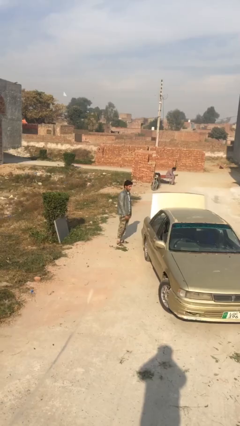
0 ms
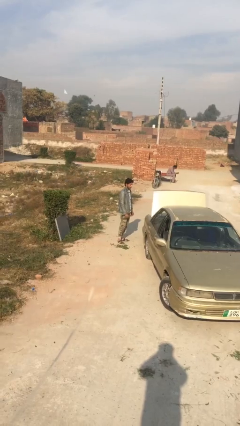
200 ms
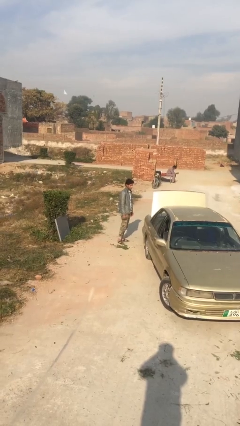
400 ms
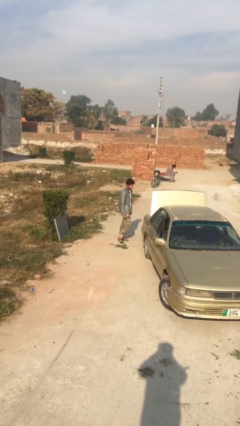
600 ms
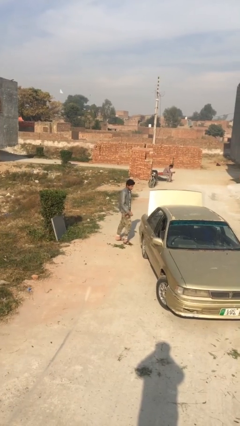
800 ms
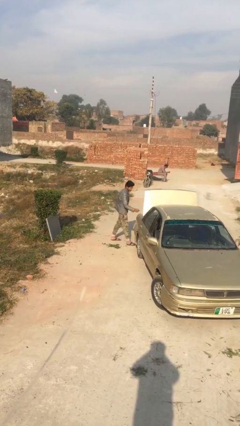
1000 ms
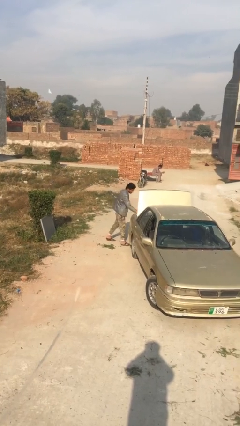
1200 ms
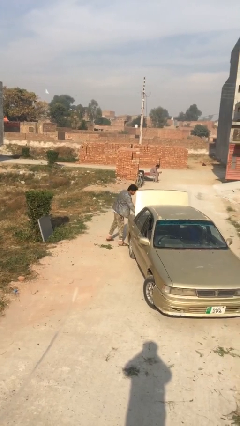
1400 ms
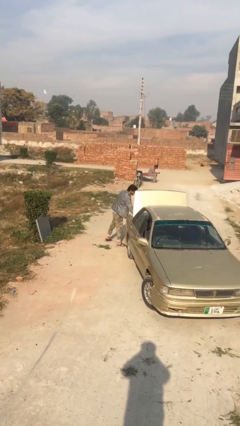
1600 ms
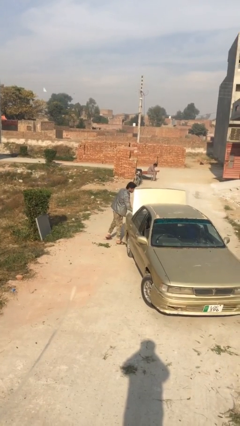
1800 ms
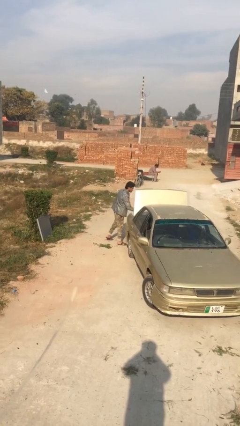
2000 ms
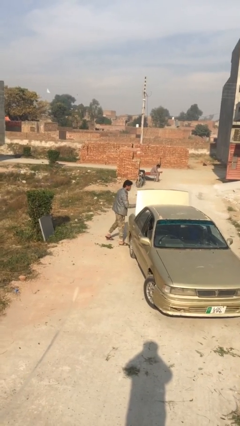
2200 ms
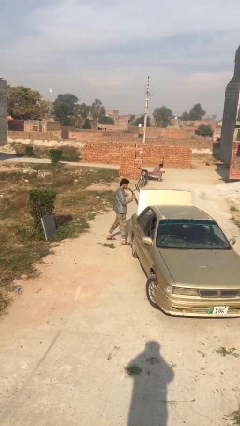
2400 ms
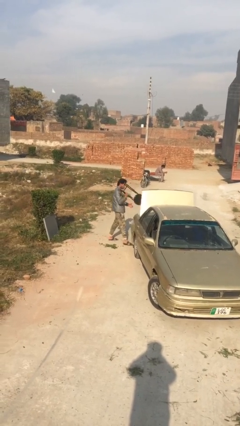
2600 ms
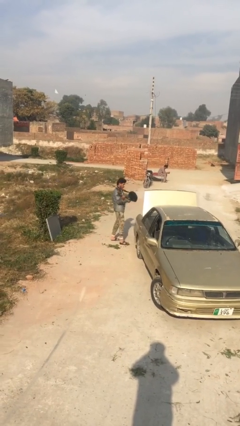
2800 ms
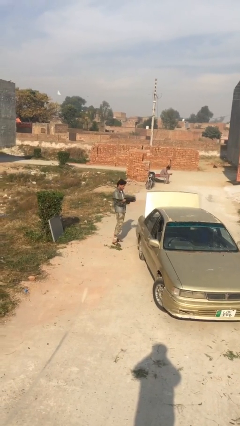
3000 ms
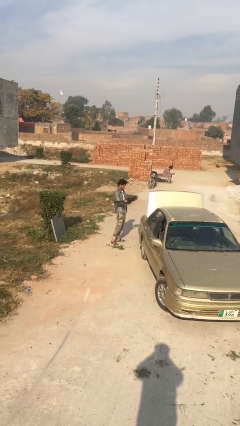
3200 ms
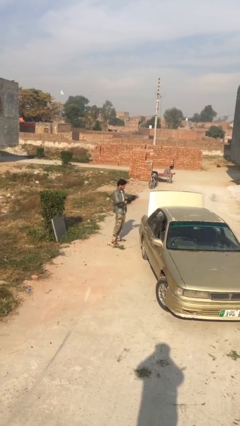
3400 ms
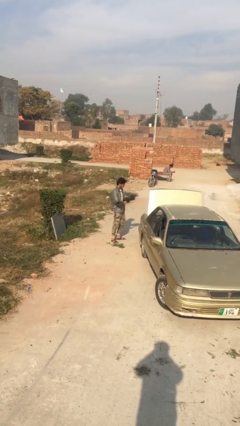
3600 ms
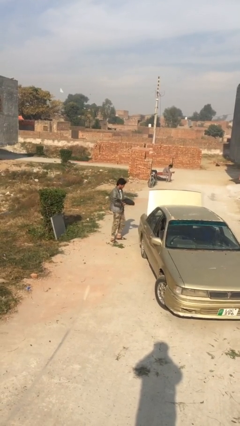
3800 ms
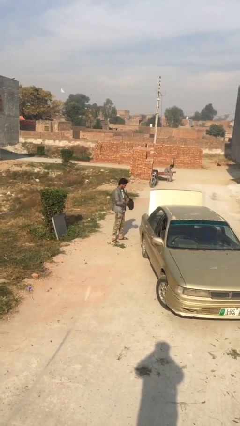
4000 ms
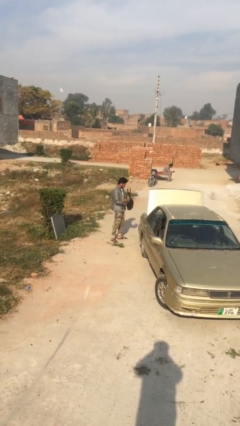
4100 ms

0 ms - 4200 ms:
person unloads car

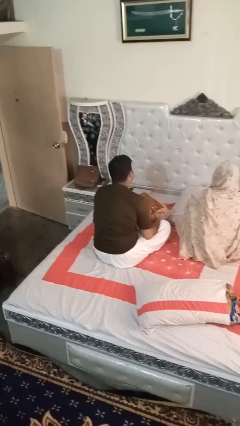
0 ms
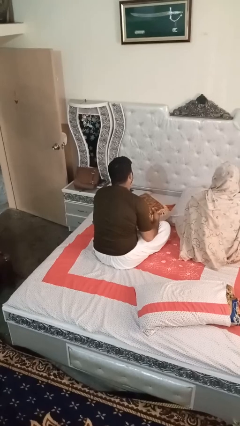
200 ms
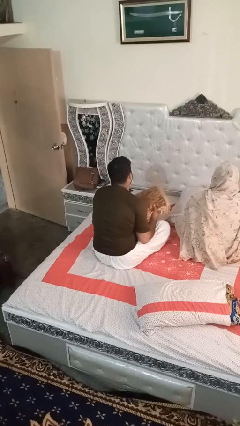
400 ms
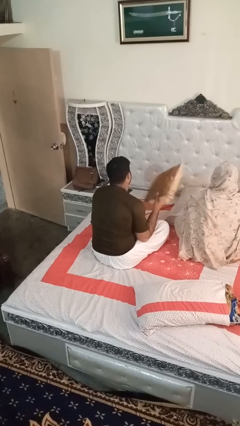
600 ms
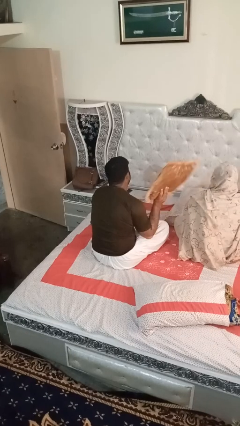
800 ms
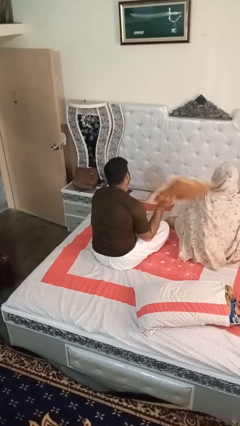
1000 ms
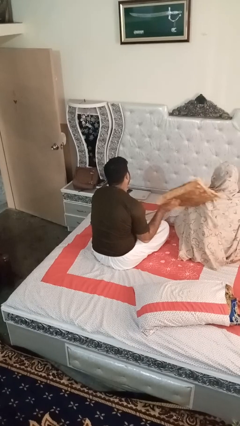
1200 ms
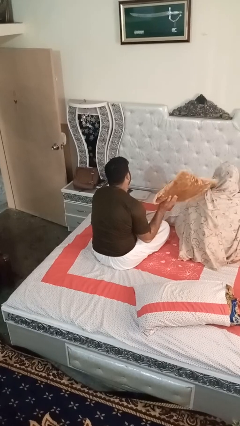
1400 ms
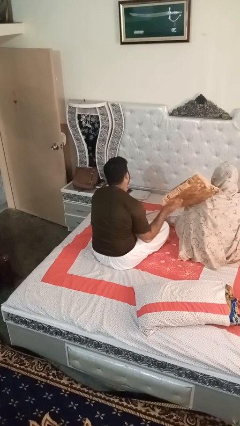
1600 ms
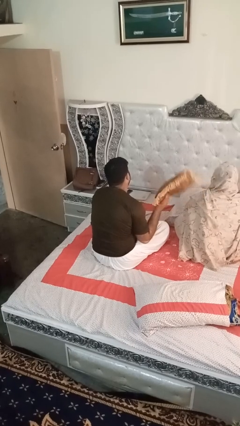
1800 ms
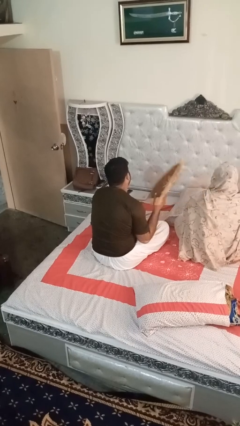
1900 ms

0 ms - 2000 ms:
person hits person with pillow

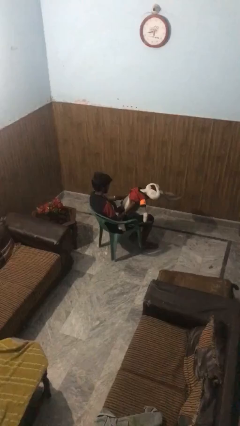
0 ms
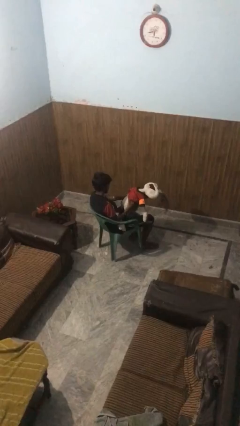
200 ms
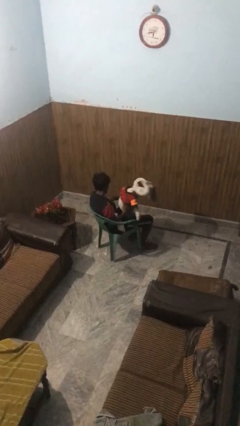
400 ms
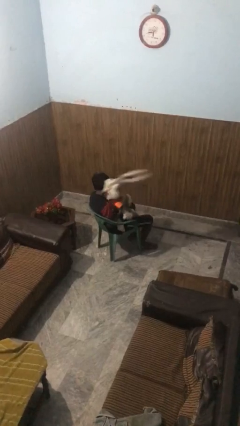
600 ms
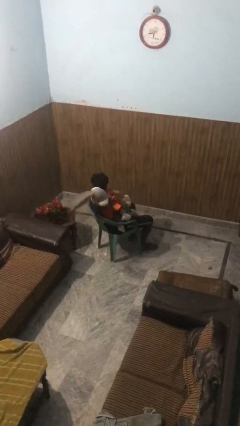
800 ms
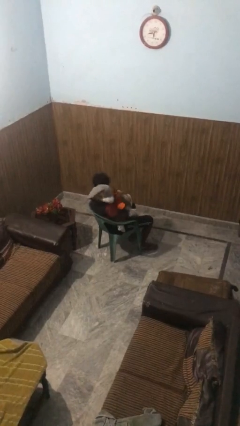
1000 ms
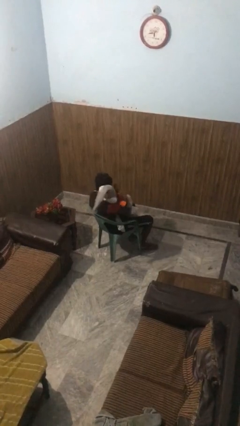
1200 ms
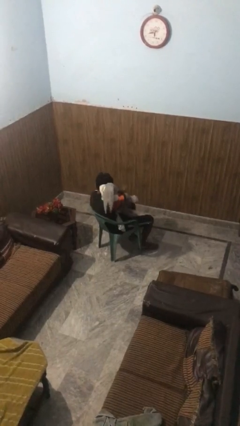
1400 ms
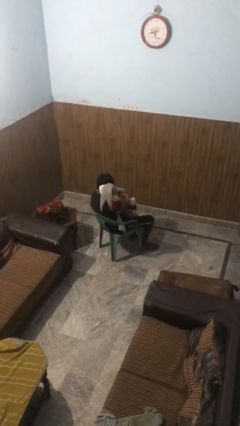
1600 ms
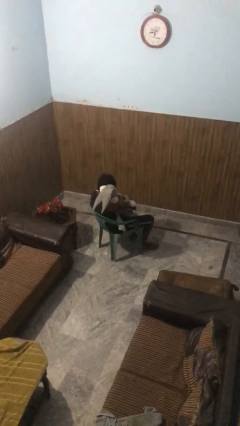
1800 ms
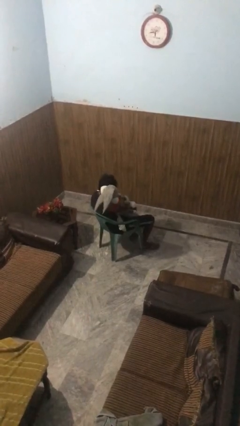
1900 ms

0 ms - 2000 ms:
person hugs stuffed animal

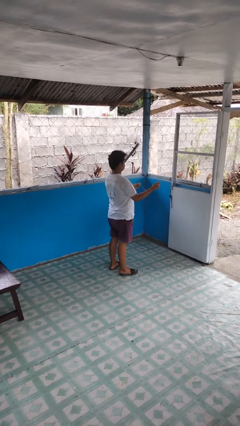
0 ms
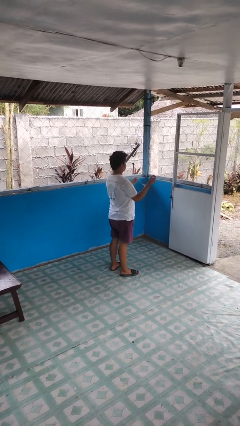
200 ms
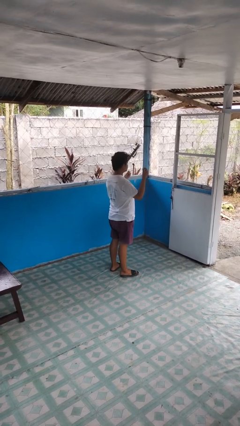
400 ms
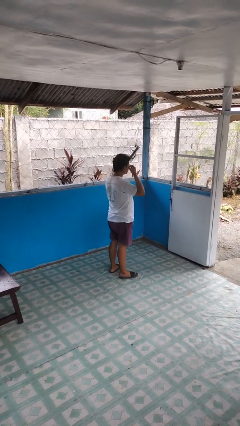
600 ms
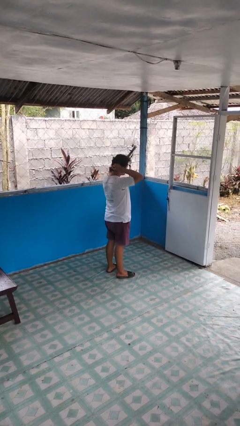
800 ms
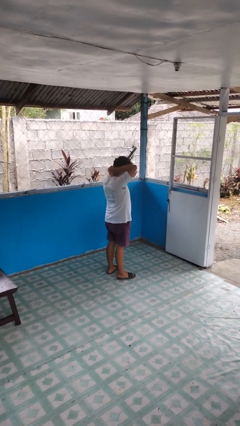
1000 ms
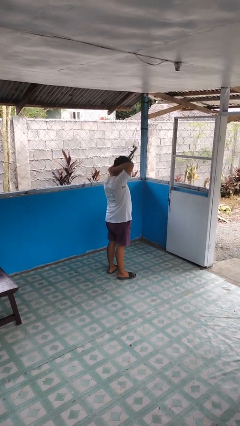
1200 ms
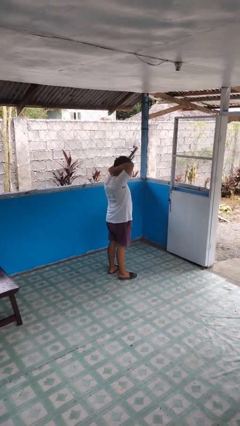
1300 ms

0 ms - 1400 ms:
person puts on necklace

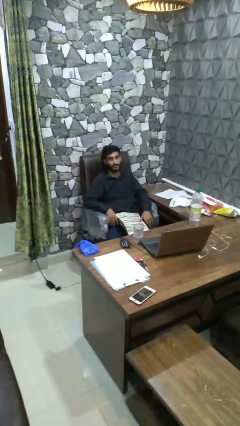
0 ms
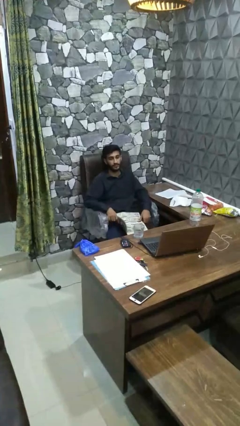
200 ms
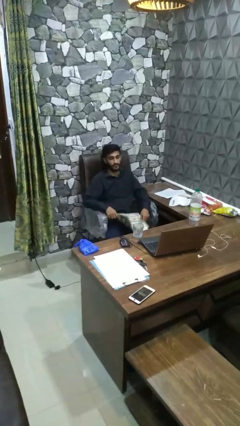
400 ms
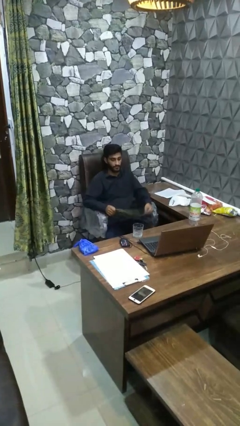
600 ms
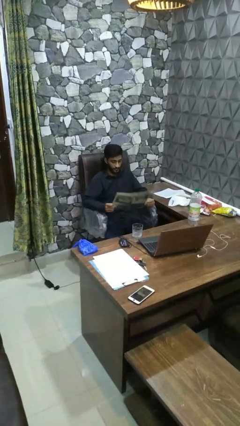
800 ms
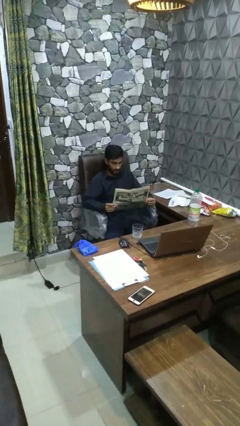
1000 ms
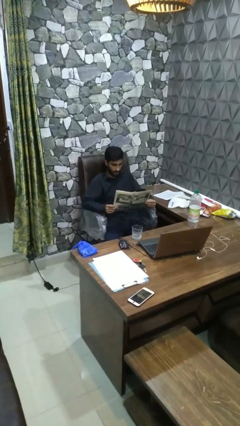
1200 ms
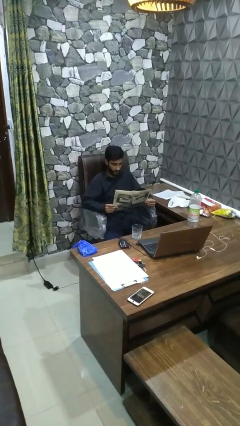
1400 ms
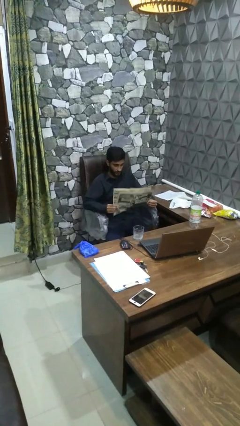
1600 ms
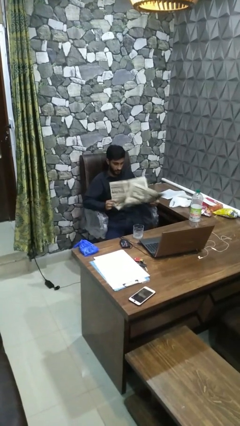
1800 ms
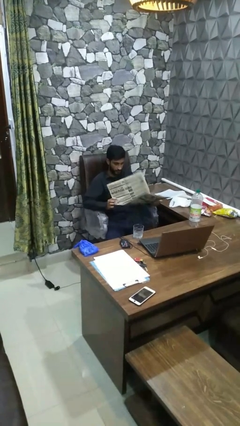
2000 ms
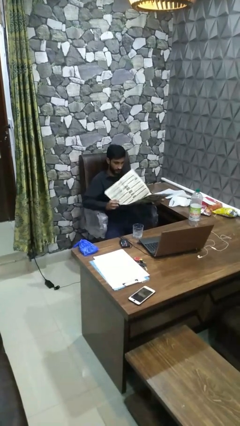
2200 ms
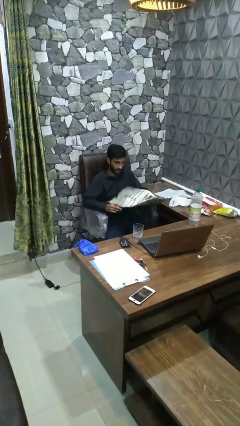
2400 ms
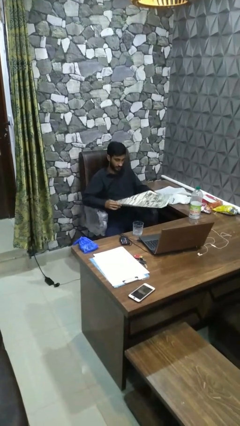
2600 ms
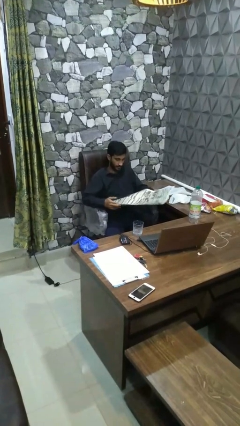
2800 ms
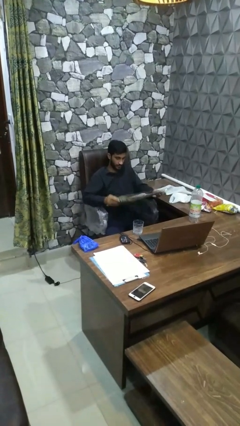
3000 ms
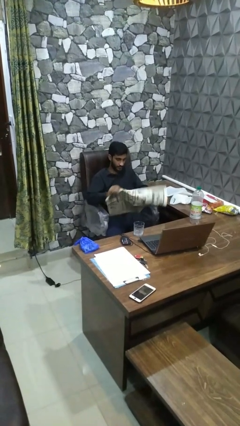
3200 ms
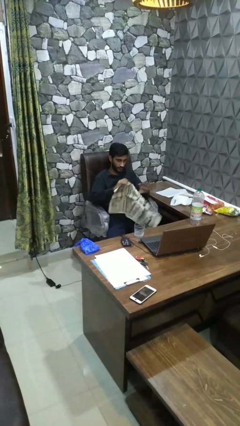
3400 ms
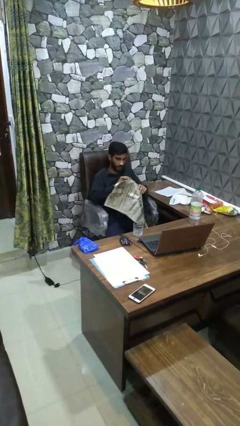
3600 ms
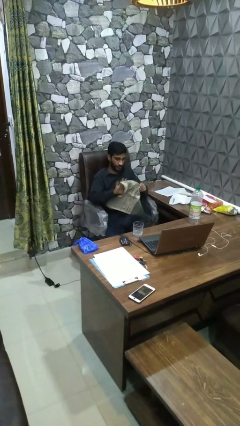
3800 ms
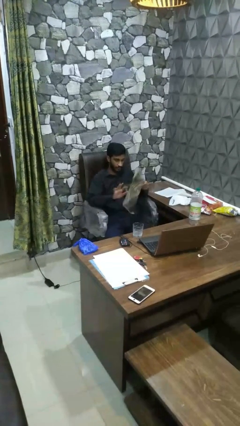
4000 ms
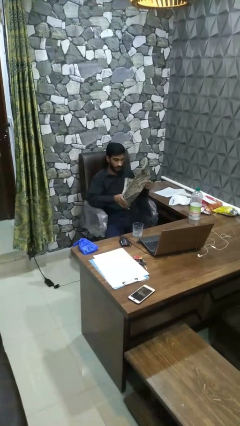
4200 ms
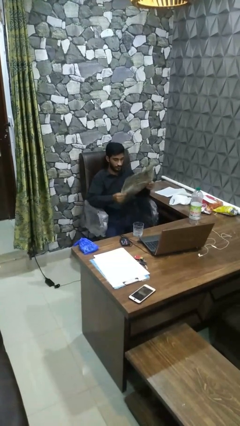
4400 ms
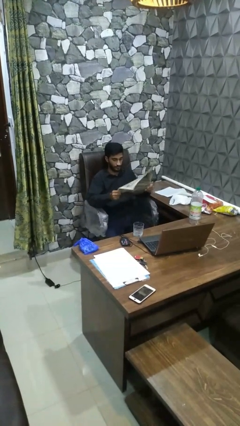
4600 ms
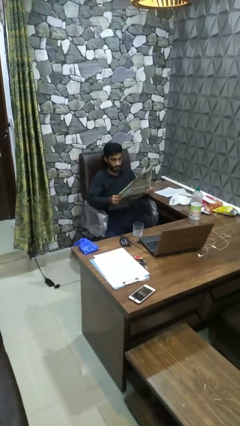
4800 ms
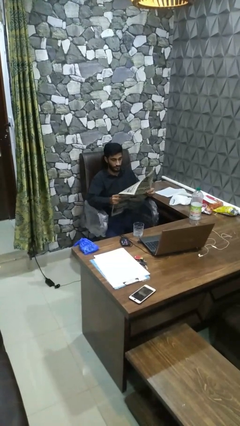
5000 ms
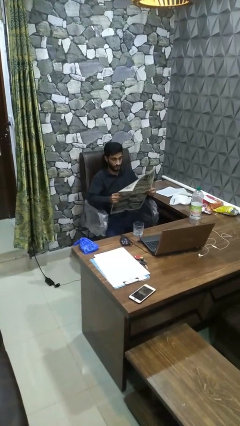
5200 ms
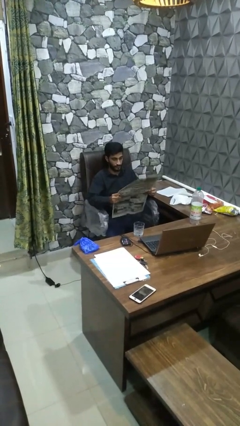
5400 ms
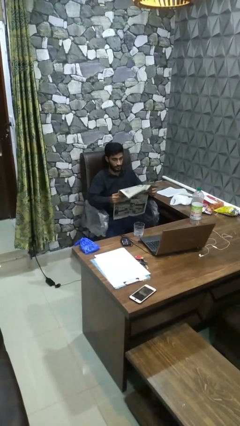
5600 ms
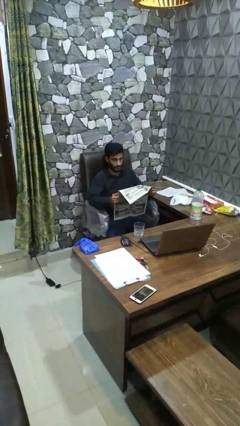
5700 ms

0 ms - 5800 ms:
person reads newspaper

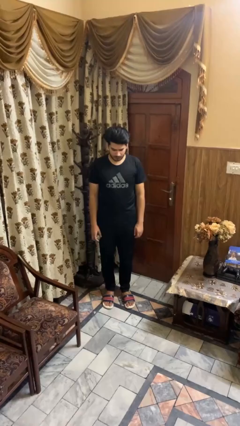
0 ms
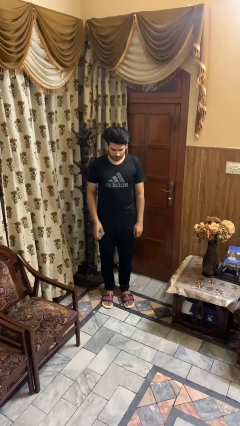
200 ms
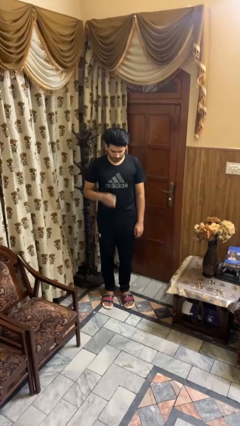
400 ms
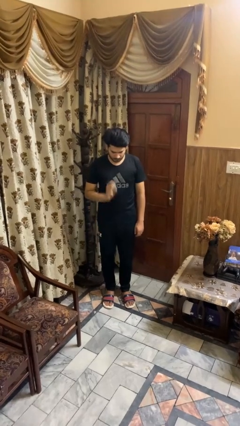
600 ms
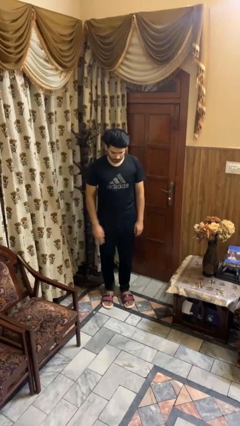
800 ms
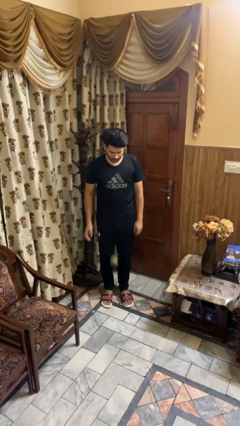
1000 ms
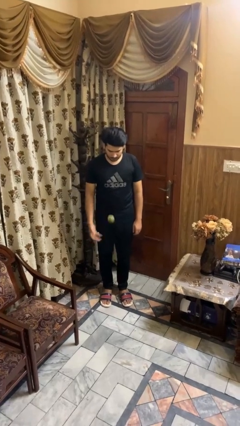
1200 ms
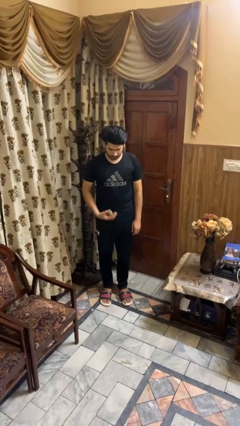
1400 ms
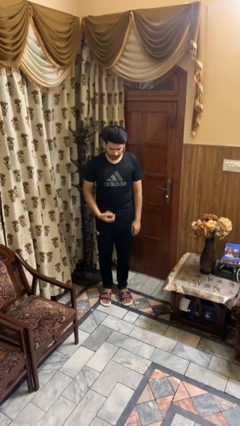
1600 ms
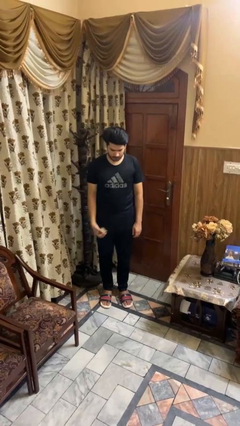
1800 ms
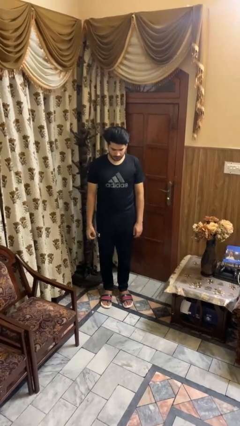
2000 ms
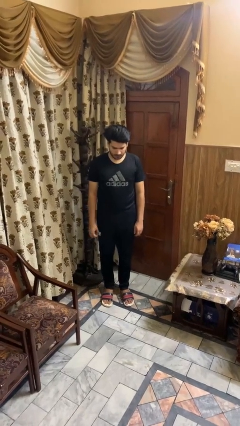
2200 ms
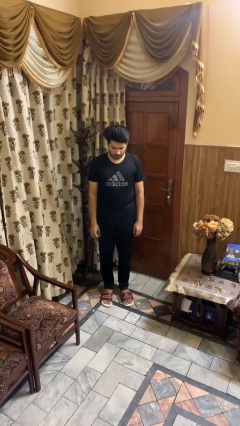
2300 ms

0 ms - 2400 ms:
person bounces ball on floor
